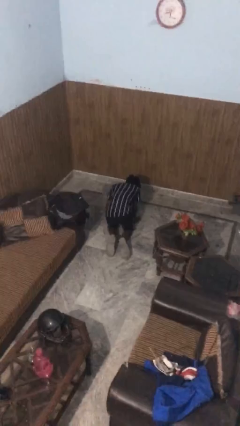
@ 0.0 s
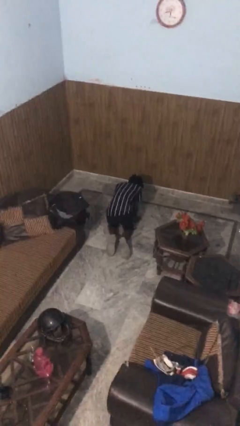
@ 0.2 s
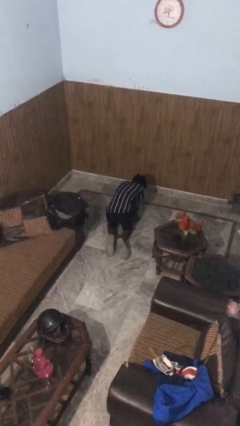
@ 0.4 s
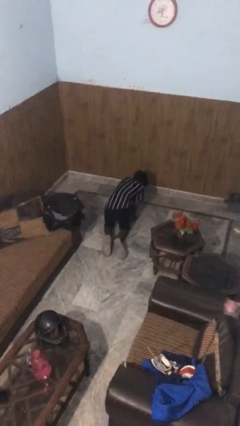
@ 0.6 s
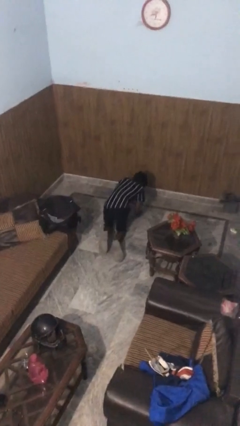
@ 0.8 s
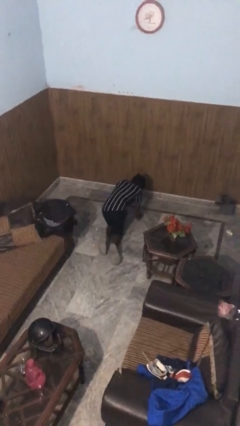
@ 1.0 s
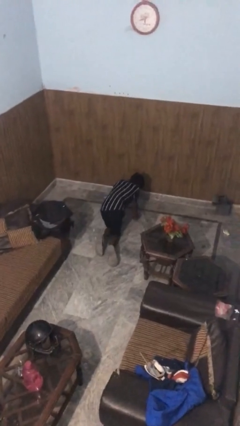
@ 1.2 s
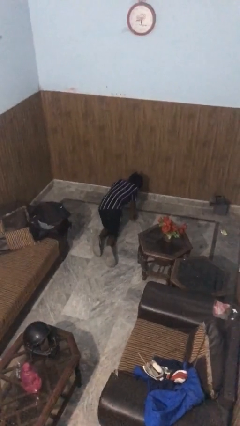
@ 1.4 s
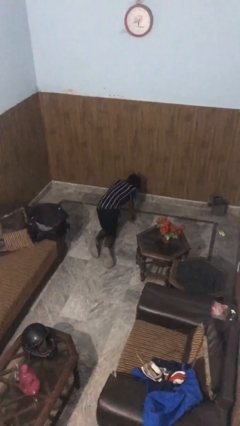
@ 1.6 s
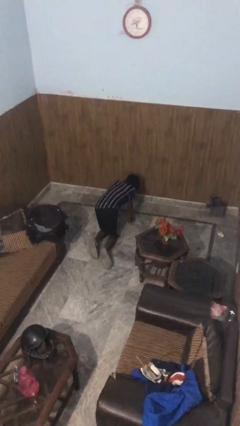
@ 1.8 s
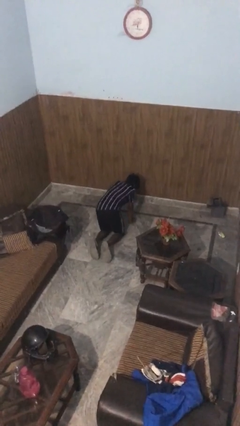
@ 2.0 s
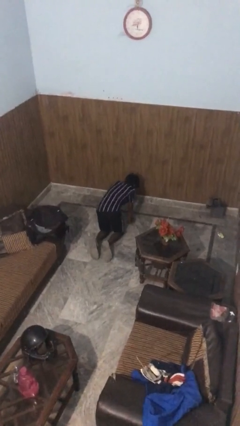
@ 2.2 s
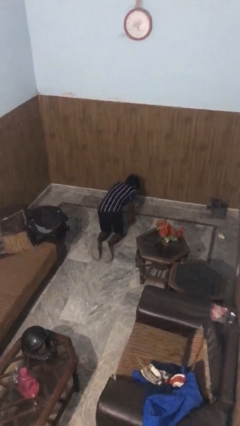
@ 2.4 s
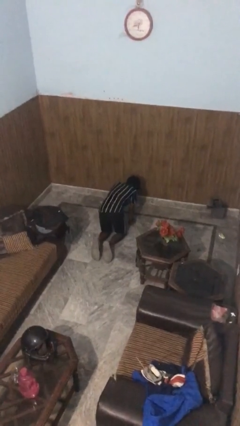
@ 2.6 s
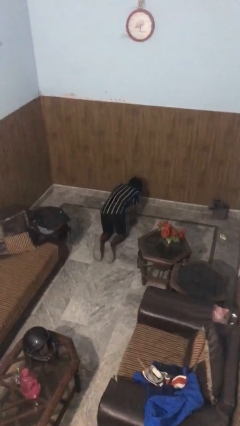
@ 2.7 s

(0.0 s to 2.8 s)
person crawls

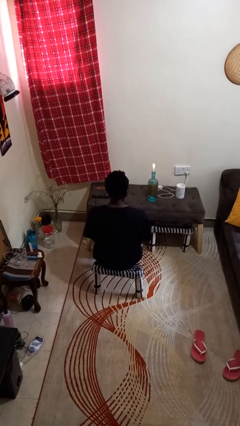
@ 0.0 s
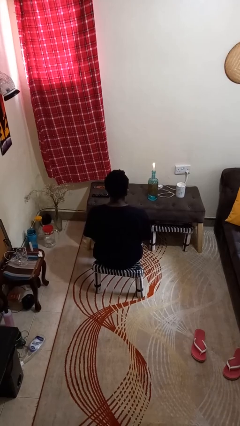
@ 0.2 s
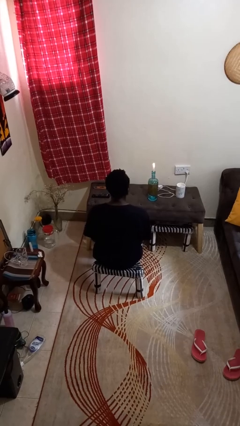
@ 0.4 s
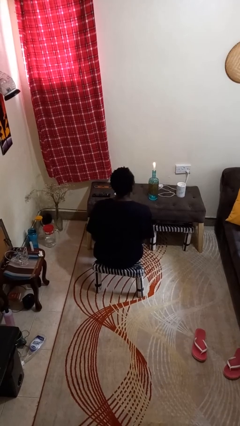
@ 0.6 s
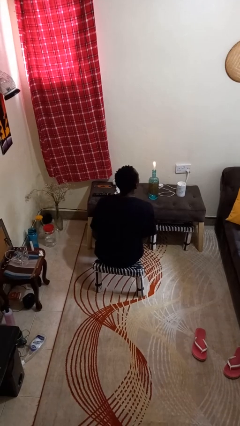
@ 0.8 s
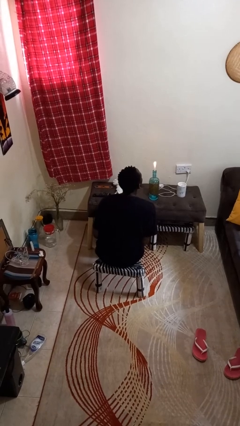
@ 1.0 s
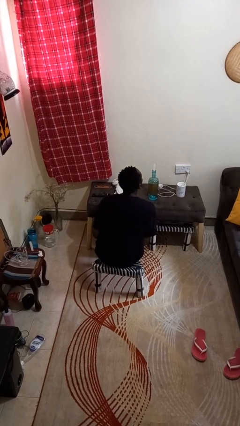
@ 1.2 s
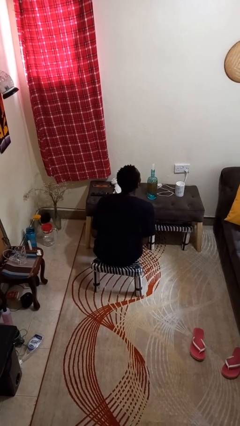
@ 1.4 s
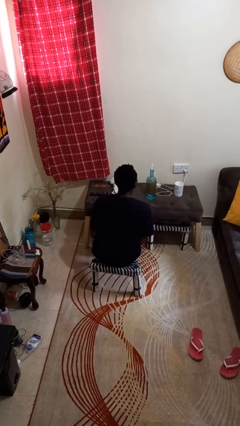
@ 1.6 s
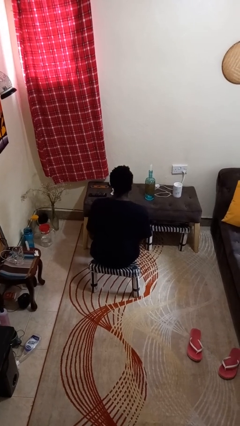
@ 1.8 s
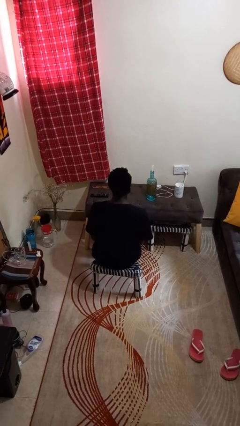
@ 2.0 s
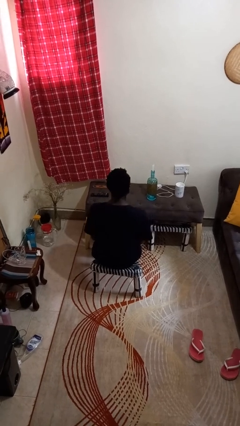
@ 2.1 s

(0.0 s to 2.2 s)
person extinguishes candle

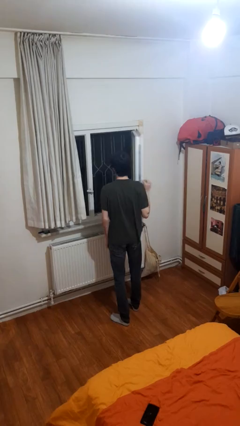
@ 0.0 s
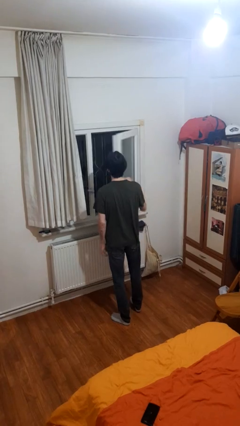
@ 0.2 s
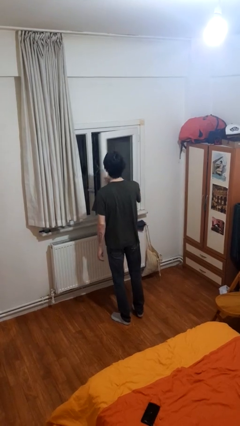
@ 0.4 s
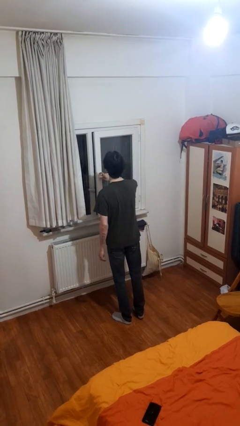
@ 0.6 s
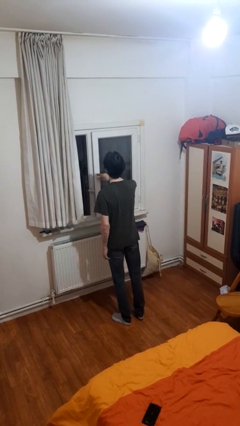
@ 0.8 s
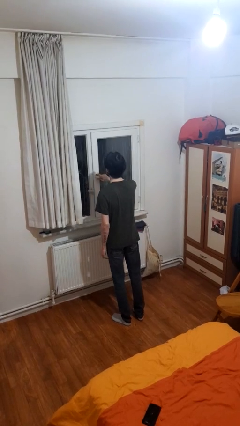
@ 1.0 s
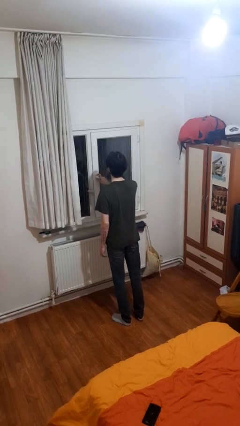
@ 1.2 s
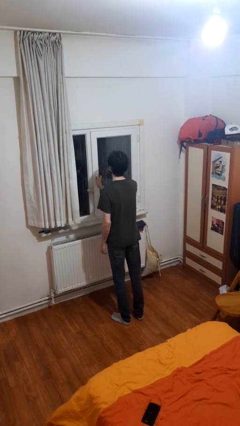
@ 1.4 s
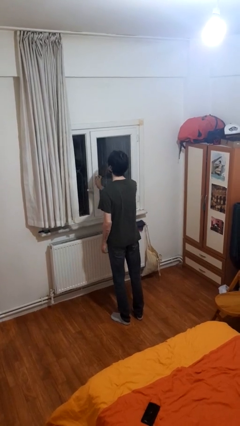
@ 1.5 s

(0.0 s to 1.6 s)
person closes home window

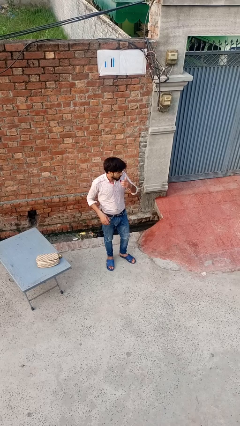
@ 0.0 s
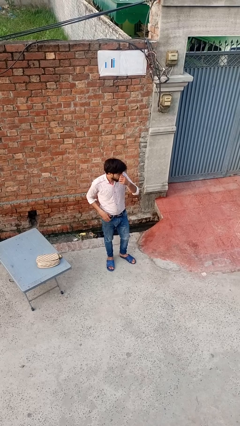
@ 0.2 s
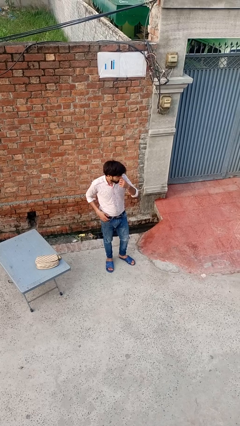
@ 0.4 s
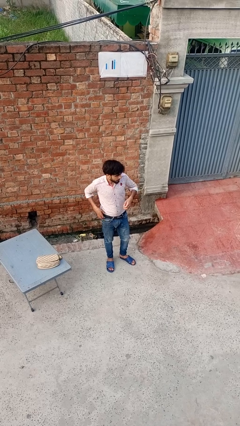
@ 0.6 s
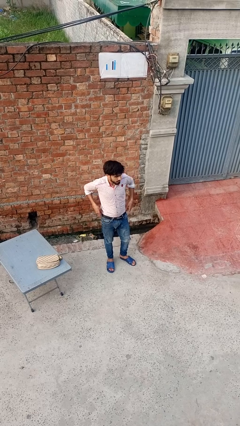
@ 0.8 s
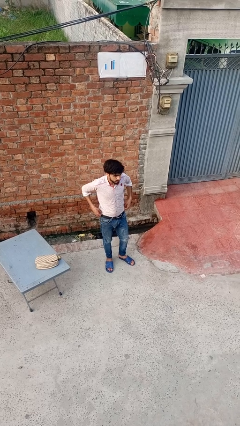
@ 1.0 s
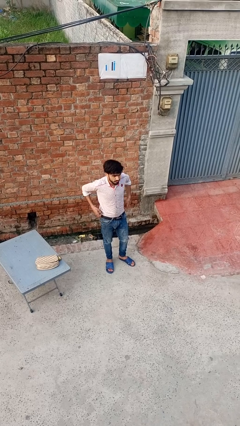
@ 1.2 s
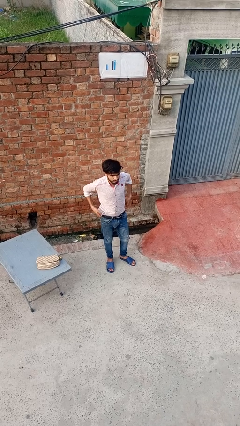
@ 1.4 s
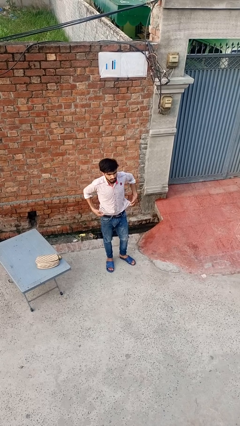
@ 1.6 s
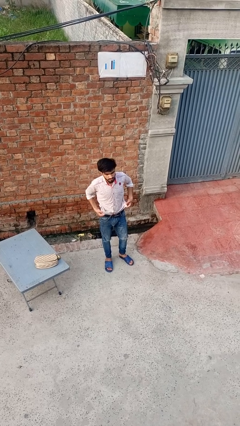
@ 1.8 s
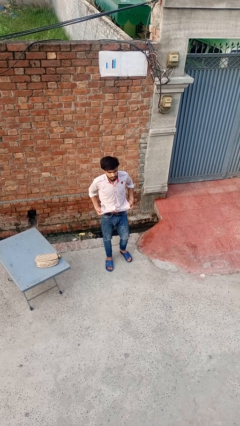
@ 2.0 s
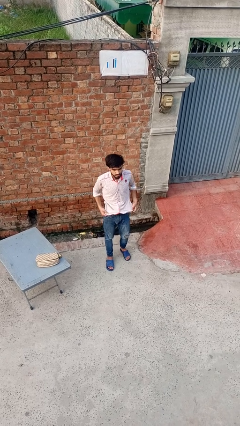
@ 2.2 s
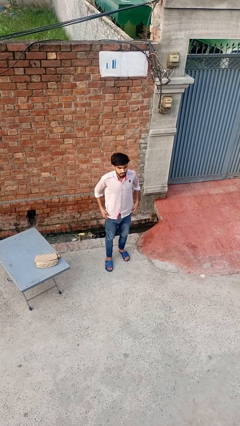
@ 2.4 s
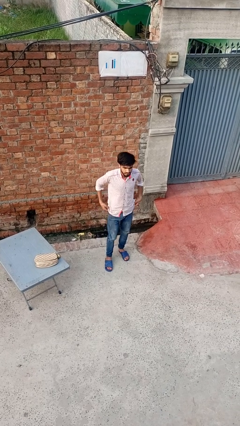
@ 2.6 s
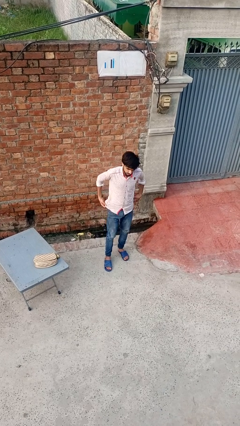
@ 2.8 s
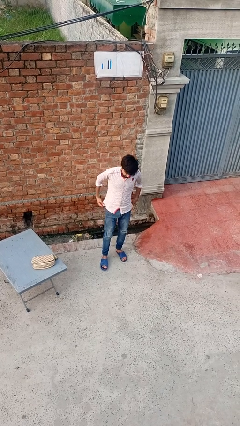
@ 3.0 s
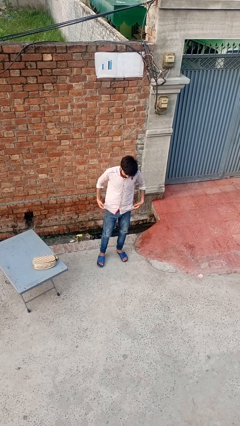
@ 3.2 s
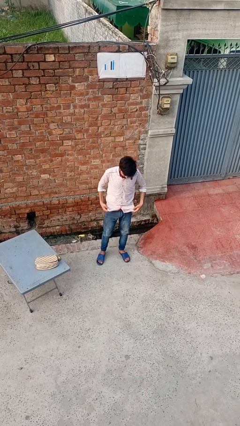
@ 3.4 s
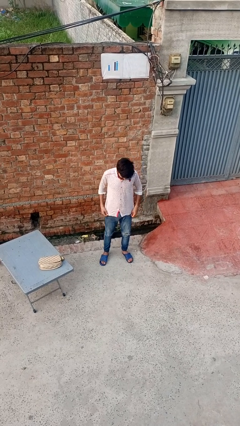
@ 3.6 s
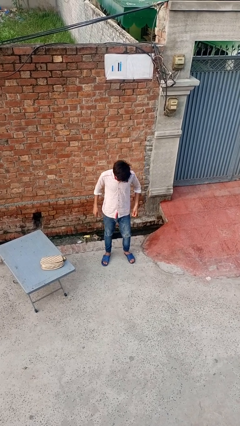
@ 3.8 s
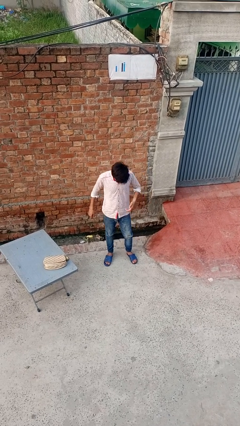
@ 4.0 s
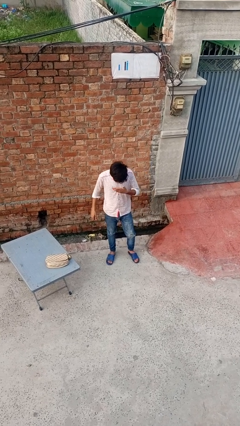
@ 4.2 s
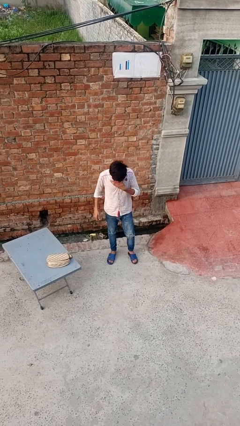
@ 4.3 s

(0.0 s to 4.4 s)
person untucks shirt

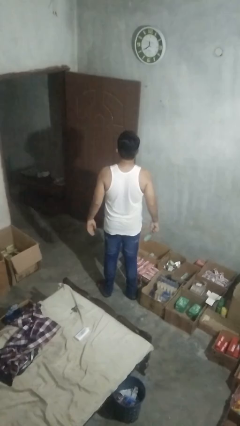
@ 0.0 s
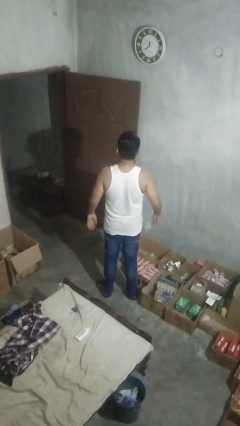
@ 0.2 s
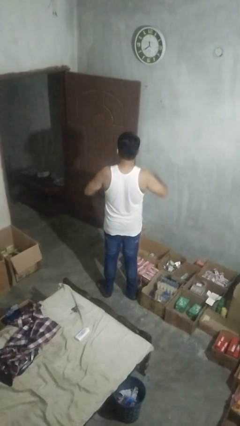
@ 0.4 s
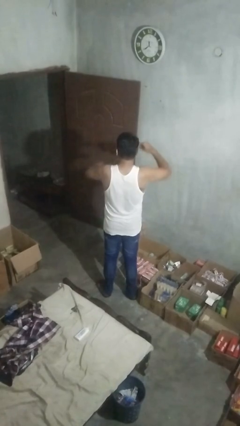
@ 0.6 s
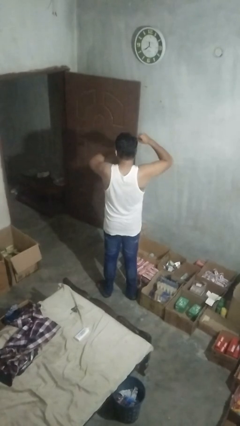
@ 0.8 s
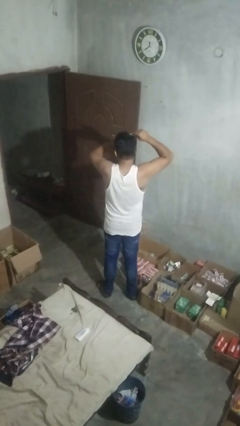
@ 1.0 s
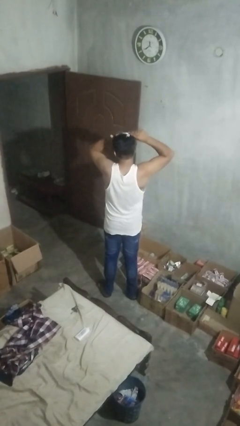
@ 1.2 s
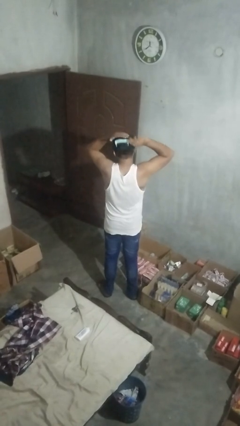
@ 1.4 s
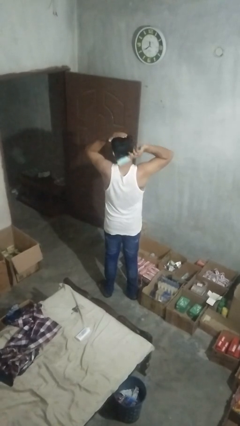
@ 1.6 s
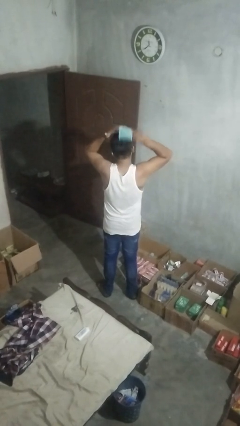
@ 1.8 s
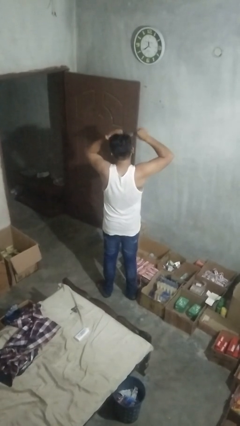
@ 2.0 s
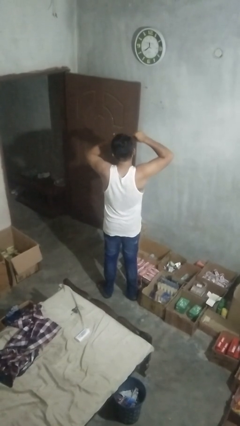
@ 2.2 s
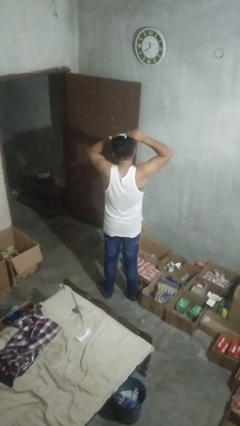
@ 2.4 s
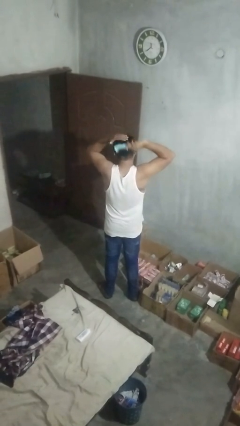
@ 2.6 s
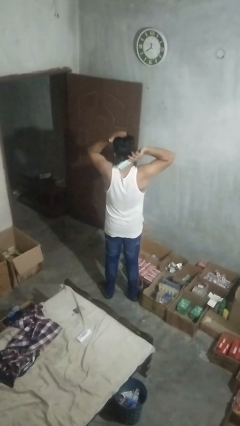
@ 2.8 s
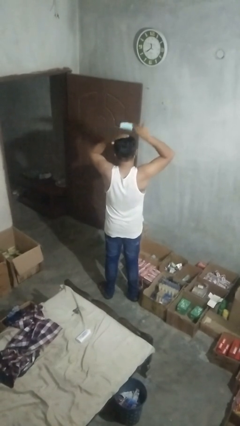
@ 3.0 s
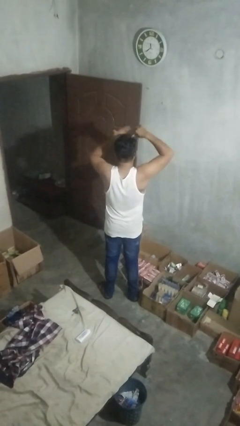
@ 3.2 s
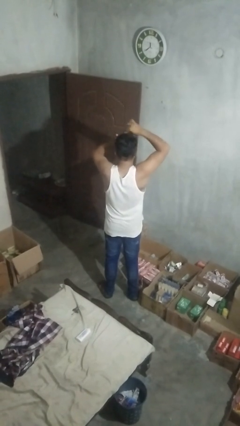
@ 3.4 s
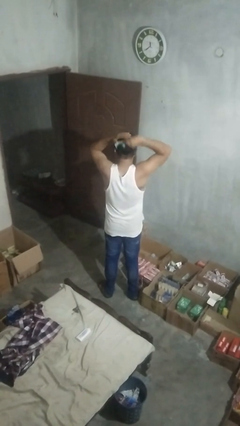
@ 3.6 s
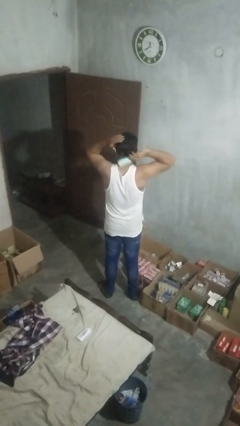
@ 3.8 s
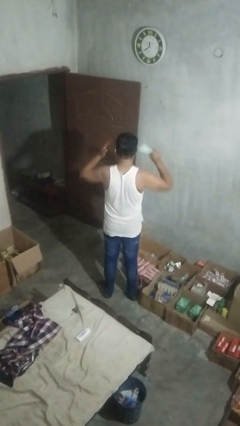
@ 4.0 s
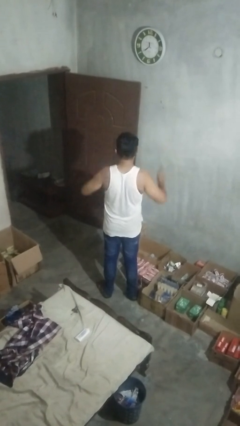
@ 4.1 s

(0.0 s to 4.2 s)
person brushes hair

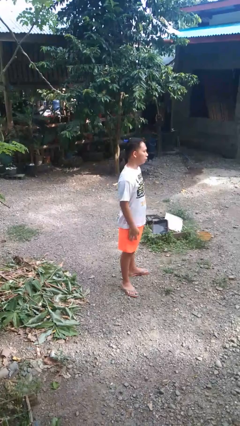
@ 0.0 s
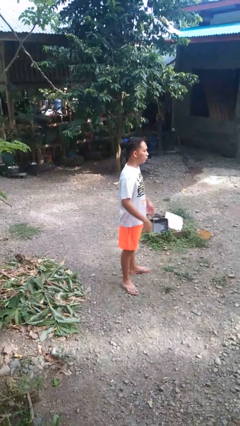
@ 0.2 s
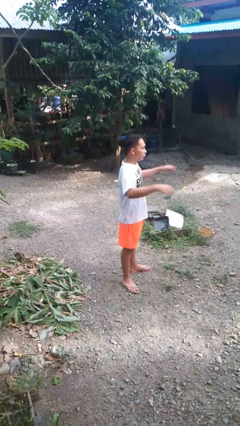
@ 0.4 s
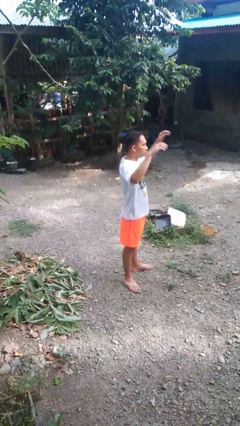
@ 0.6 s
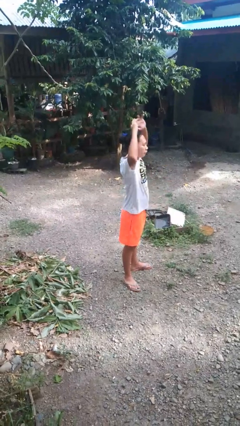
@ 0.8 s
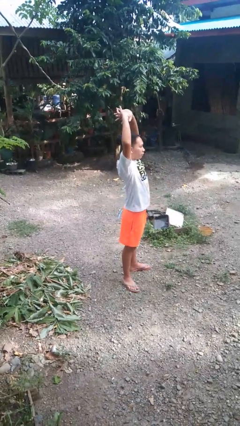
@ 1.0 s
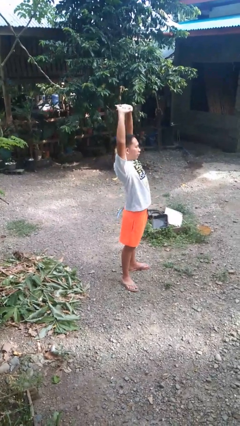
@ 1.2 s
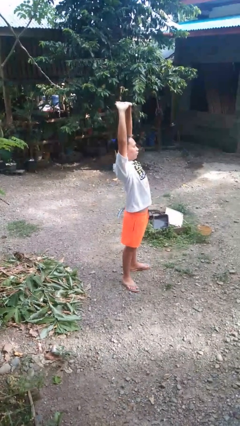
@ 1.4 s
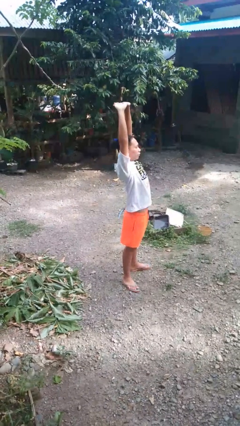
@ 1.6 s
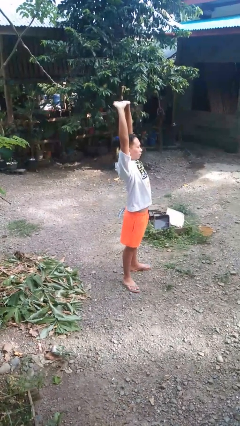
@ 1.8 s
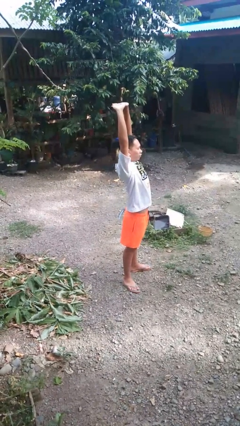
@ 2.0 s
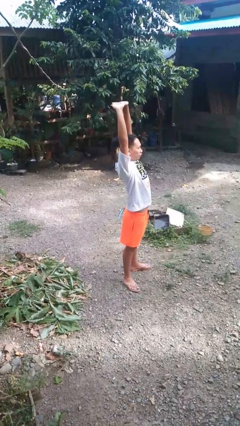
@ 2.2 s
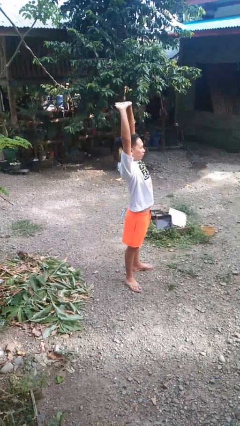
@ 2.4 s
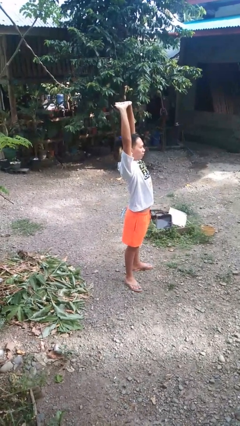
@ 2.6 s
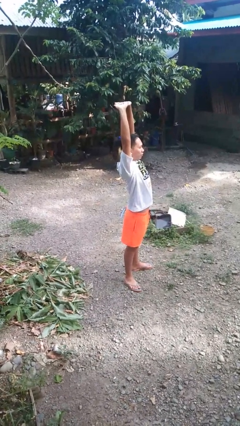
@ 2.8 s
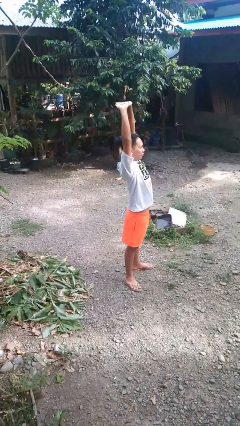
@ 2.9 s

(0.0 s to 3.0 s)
person stretches arms over head
